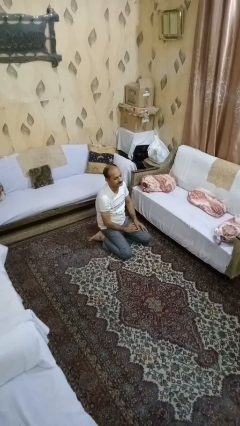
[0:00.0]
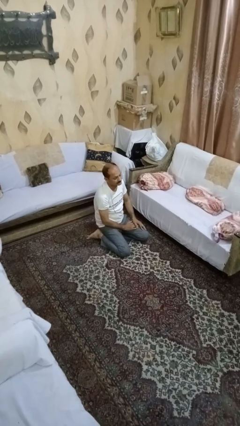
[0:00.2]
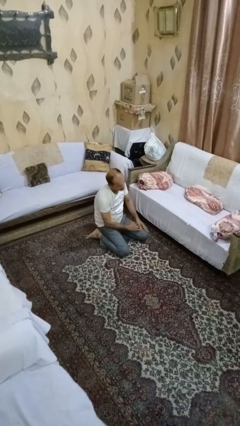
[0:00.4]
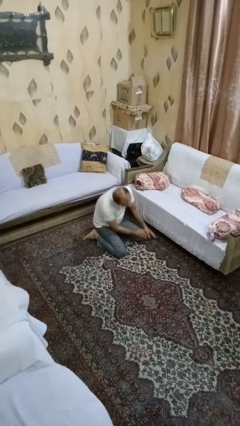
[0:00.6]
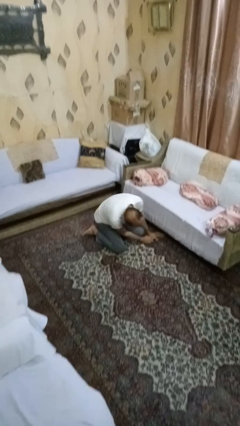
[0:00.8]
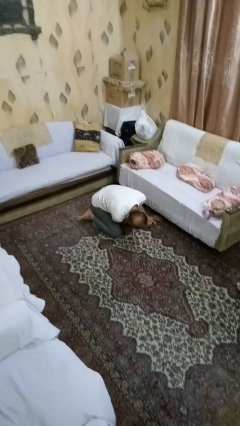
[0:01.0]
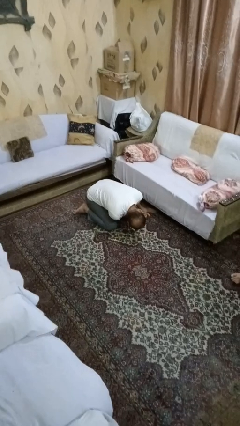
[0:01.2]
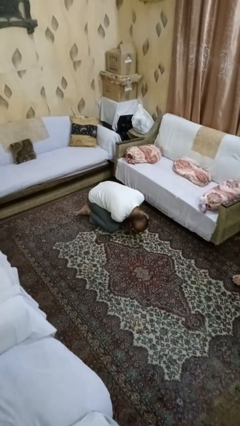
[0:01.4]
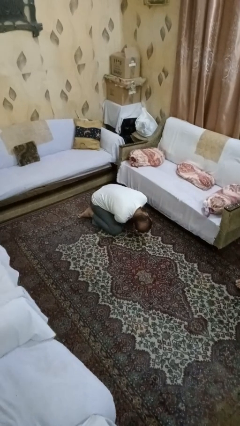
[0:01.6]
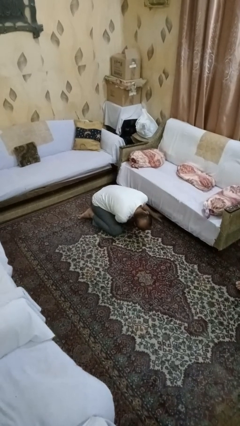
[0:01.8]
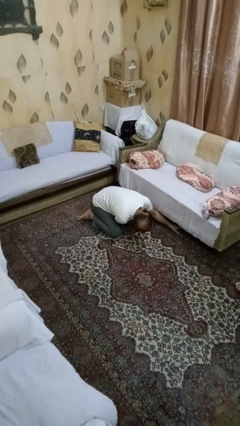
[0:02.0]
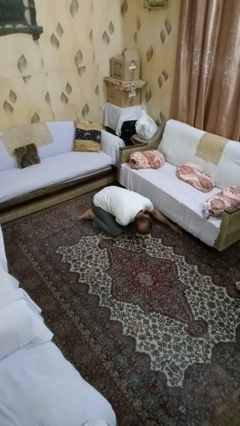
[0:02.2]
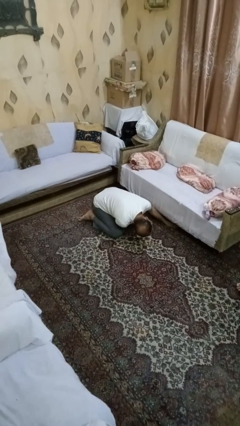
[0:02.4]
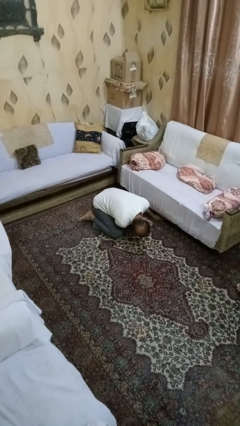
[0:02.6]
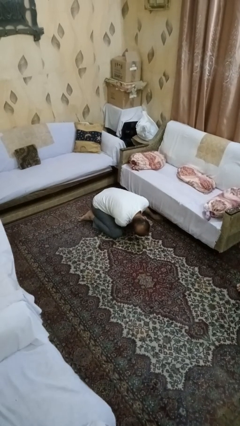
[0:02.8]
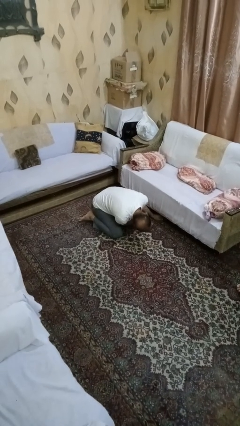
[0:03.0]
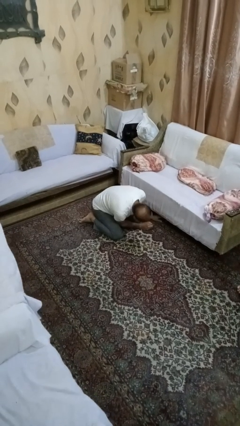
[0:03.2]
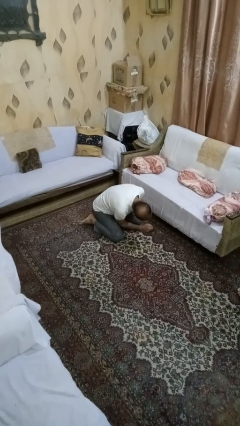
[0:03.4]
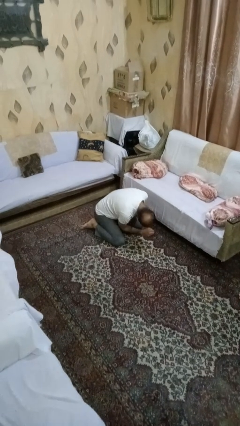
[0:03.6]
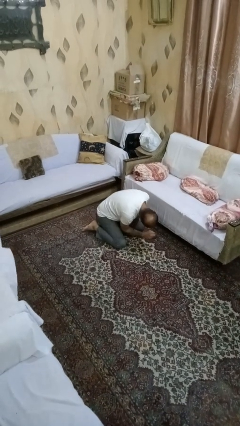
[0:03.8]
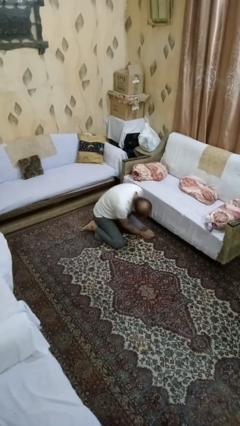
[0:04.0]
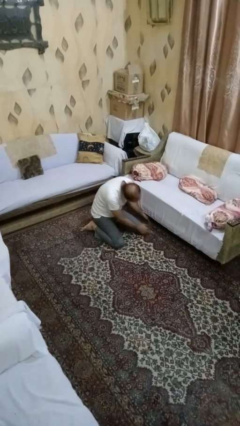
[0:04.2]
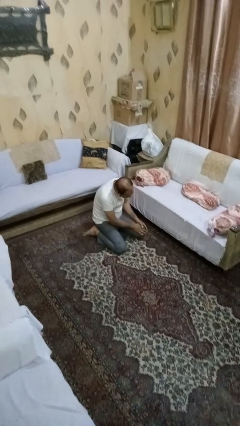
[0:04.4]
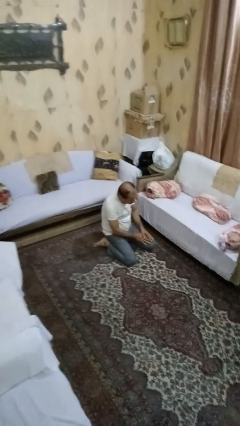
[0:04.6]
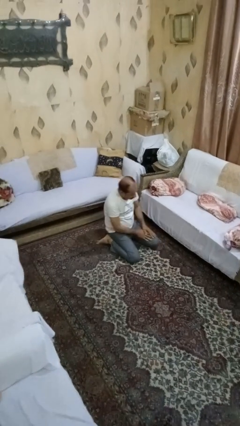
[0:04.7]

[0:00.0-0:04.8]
person searches under couch

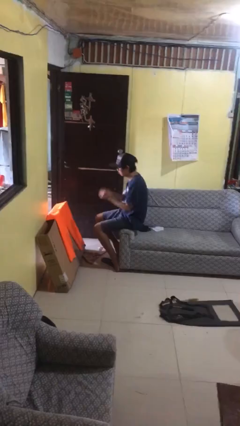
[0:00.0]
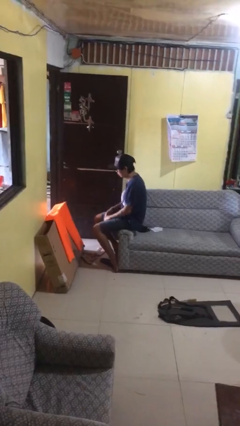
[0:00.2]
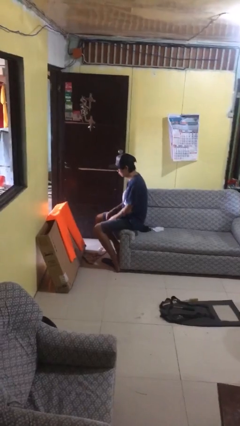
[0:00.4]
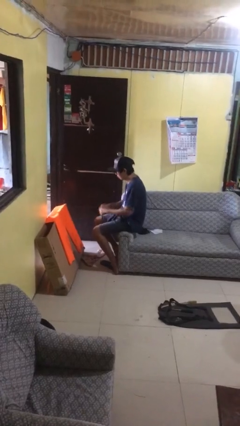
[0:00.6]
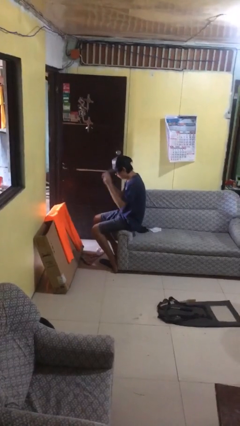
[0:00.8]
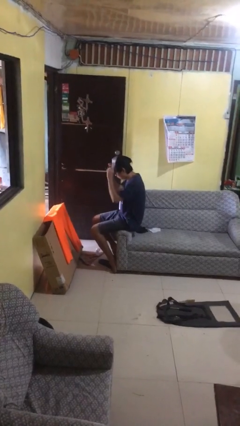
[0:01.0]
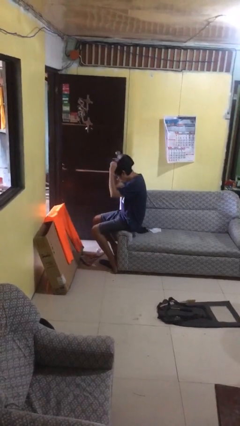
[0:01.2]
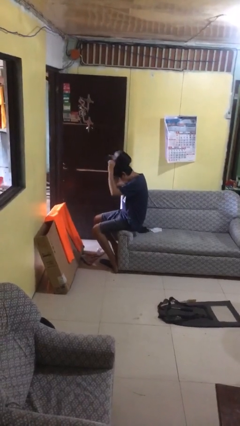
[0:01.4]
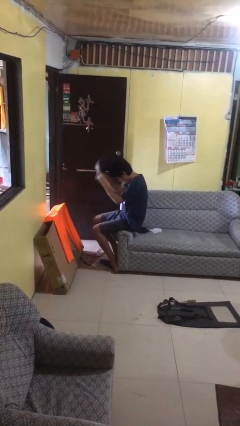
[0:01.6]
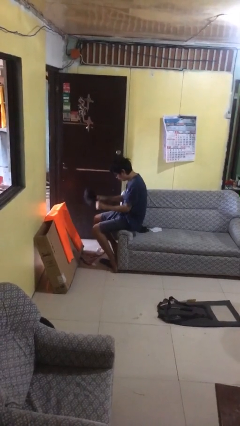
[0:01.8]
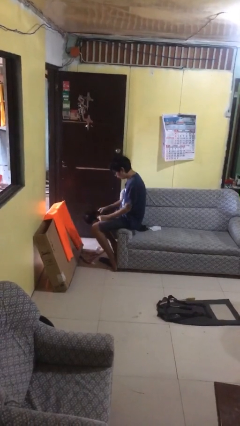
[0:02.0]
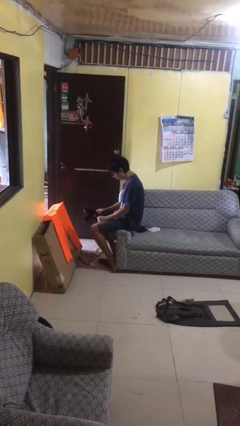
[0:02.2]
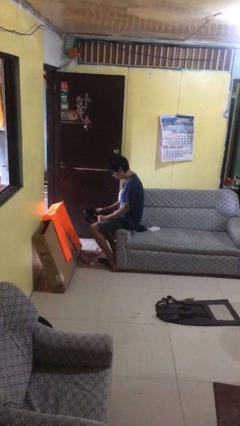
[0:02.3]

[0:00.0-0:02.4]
person takes off hat

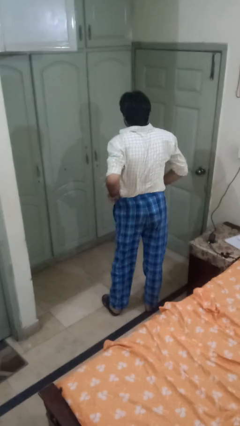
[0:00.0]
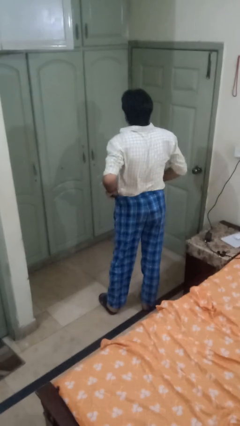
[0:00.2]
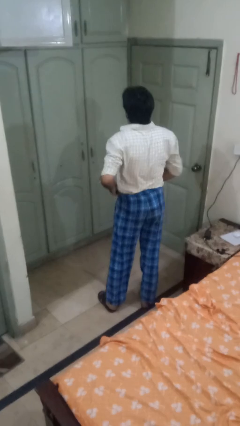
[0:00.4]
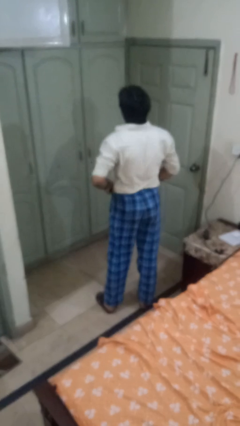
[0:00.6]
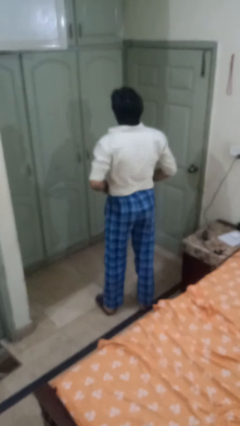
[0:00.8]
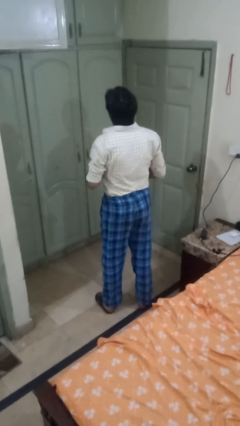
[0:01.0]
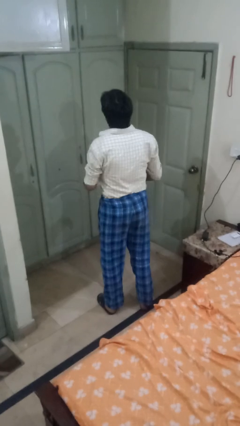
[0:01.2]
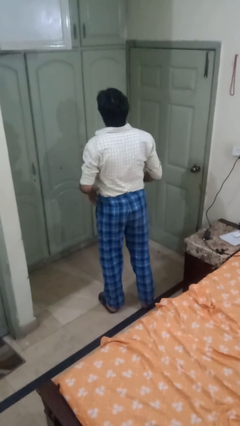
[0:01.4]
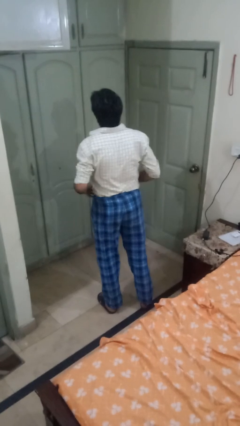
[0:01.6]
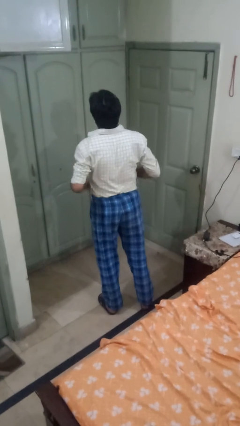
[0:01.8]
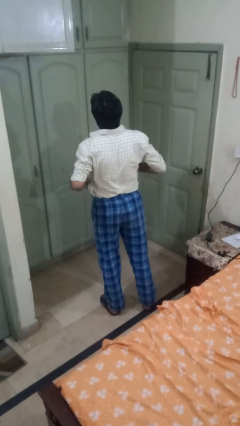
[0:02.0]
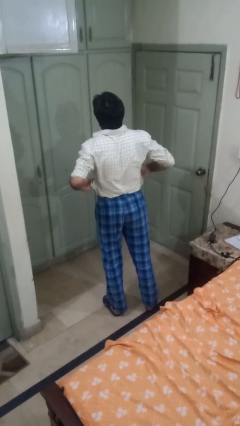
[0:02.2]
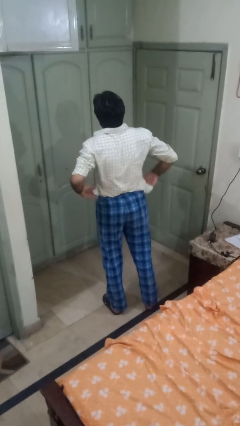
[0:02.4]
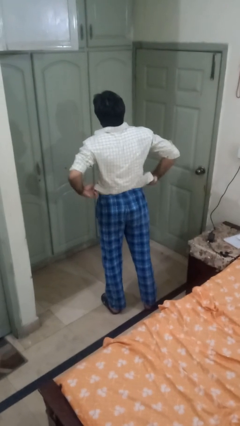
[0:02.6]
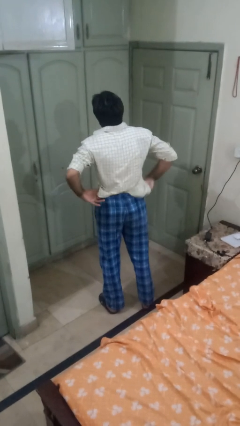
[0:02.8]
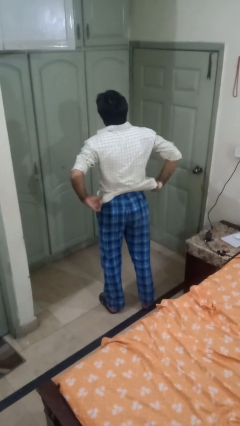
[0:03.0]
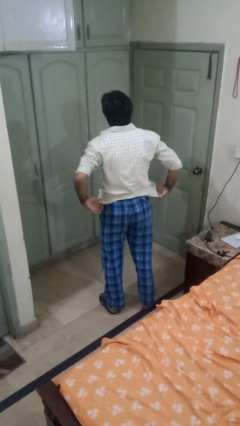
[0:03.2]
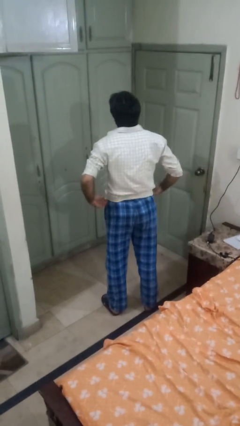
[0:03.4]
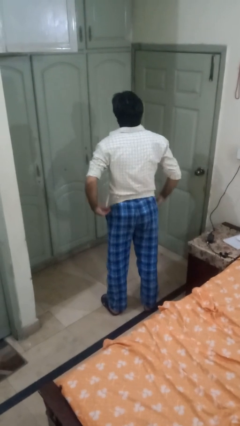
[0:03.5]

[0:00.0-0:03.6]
person untucks shirt

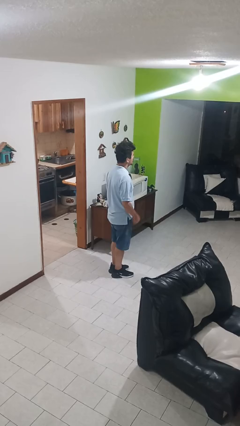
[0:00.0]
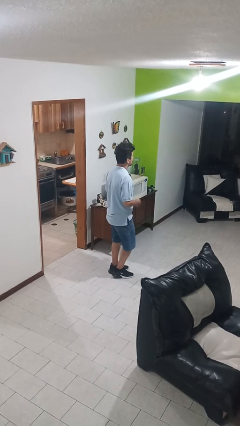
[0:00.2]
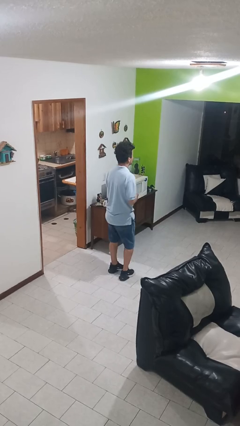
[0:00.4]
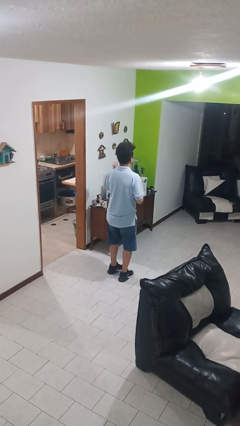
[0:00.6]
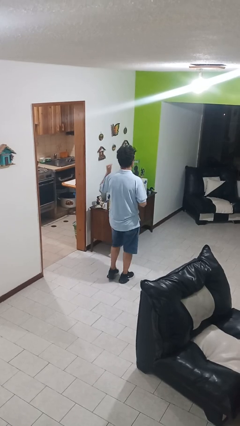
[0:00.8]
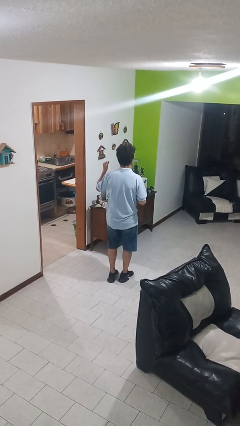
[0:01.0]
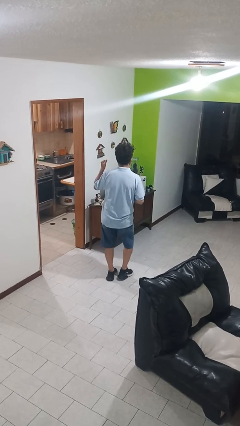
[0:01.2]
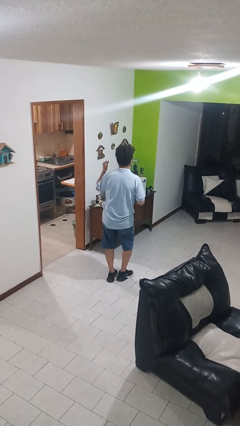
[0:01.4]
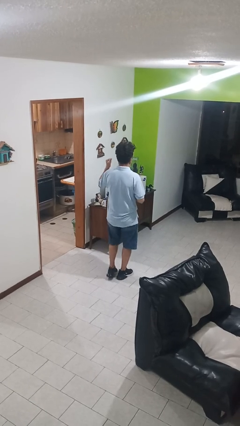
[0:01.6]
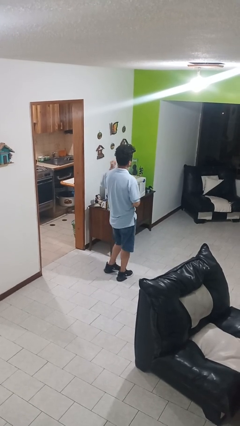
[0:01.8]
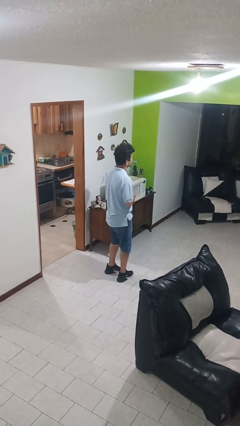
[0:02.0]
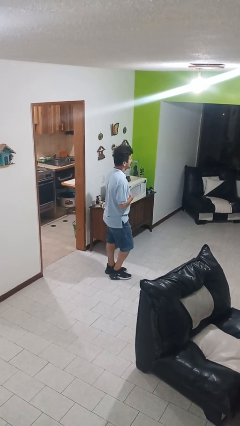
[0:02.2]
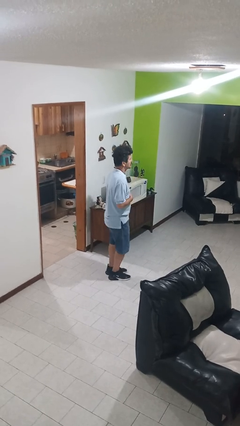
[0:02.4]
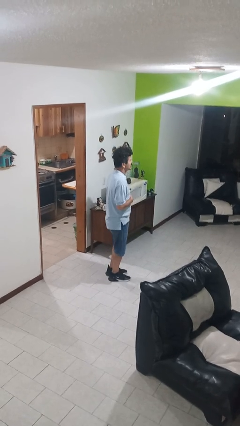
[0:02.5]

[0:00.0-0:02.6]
person dances in place

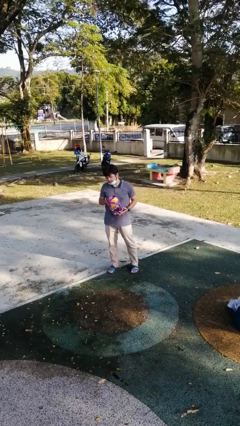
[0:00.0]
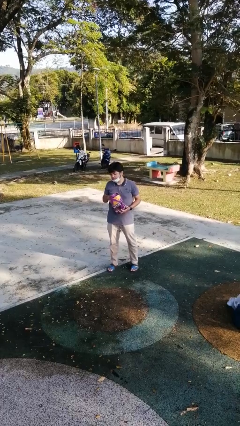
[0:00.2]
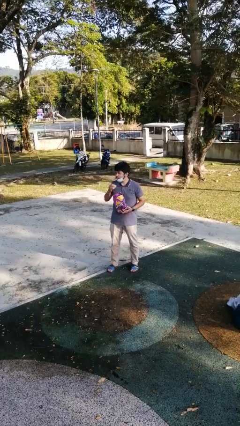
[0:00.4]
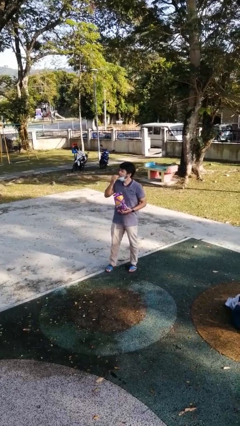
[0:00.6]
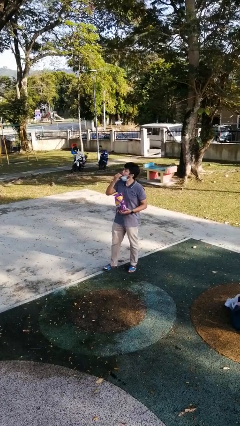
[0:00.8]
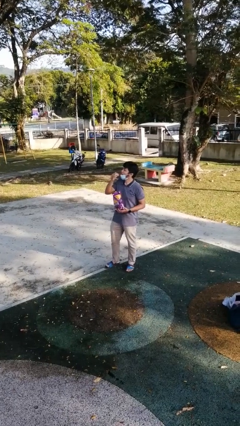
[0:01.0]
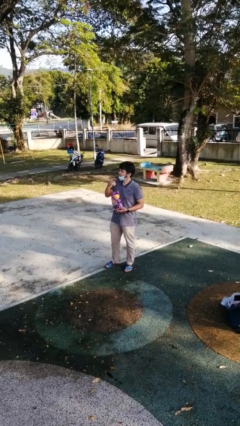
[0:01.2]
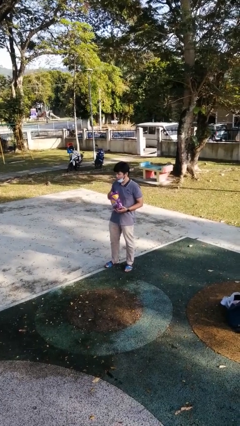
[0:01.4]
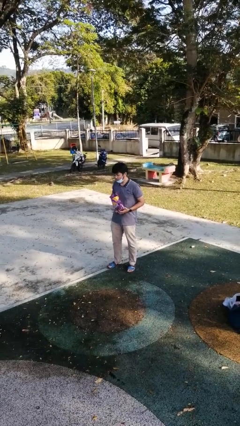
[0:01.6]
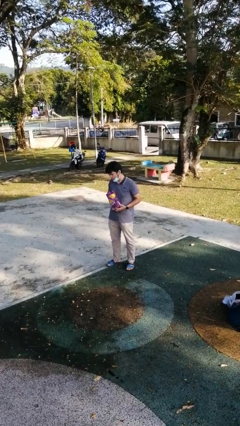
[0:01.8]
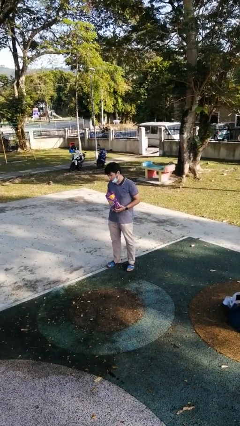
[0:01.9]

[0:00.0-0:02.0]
person eats snack from bag

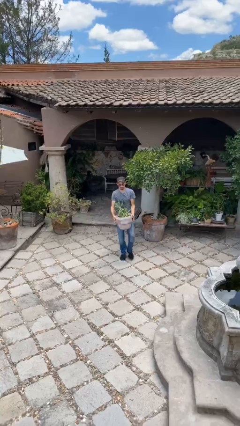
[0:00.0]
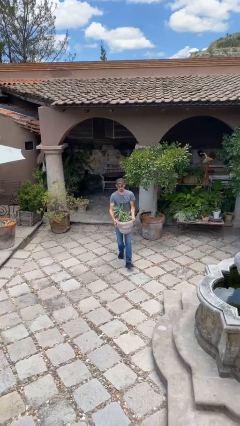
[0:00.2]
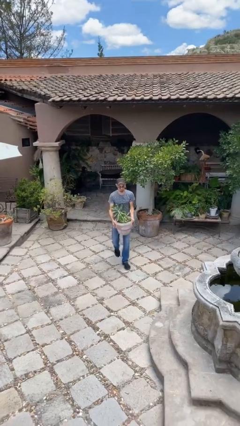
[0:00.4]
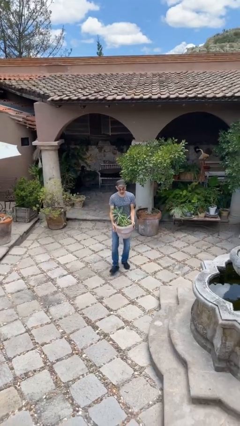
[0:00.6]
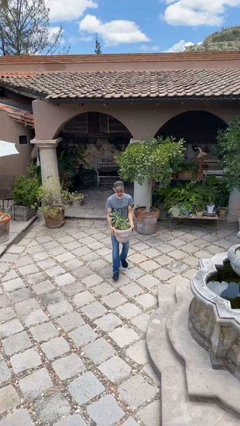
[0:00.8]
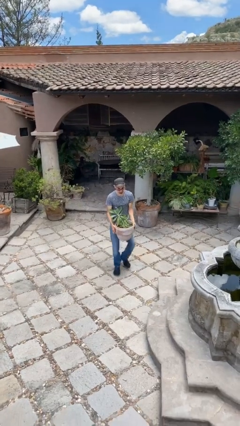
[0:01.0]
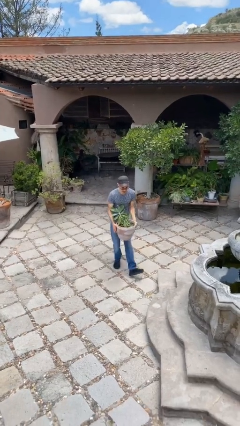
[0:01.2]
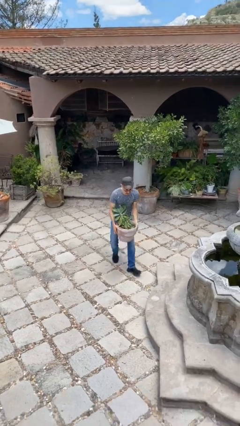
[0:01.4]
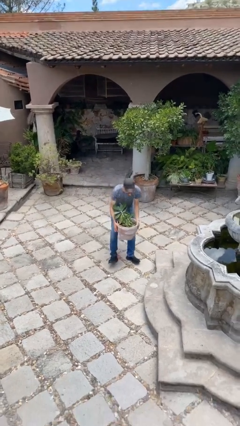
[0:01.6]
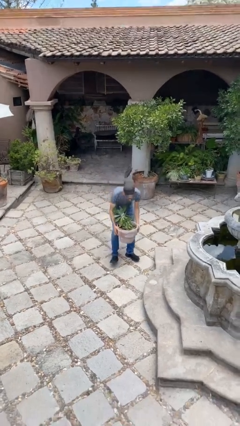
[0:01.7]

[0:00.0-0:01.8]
person carries heavy object

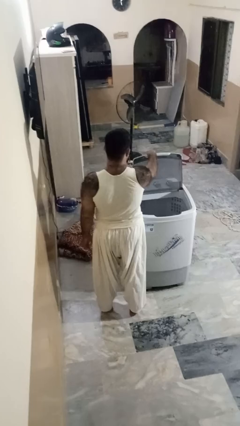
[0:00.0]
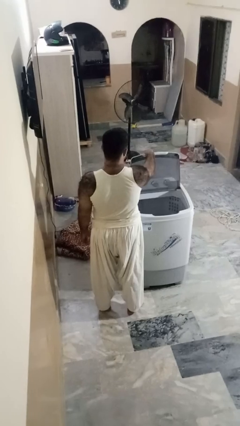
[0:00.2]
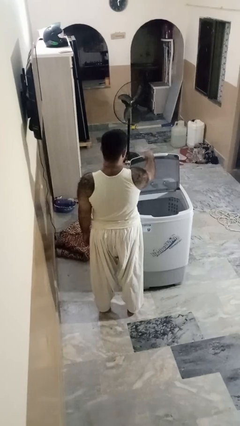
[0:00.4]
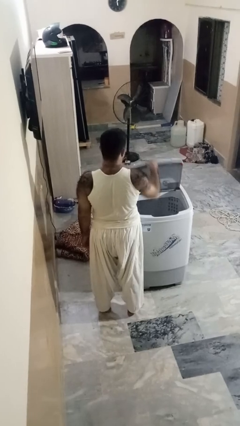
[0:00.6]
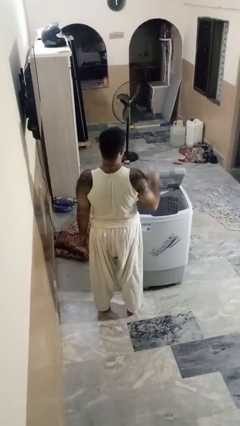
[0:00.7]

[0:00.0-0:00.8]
person closes clothes washer
